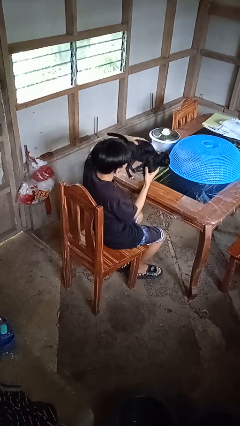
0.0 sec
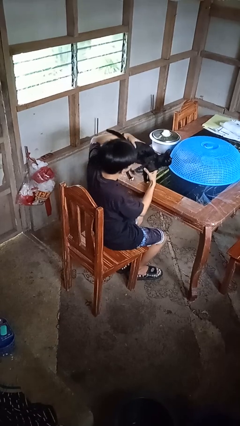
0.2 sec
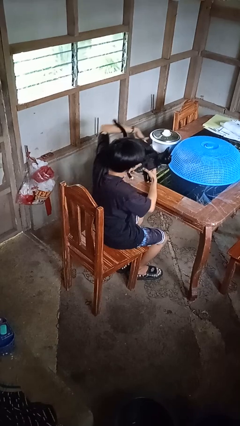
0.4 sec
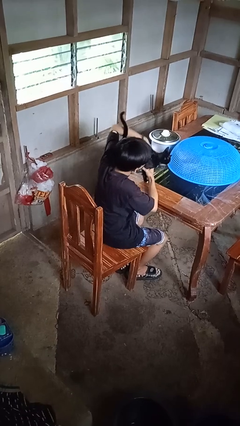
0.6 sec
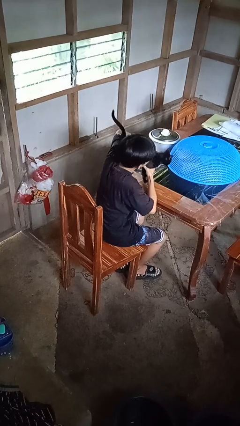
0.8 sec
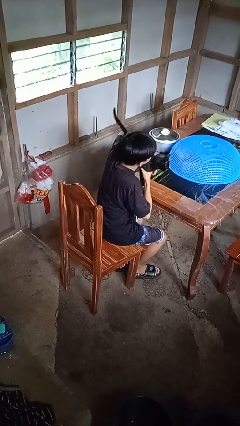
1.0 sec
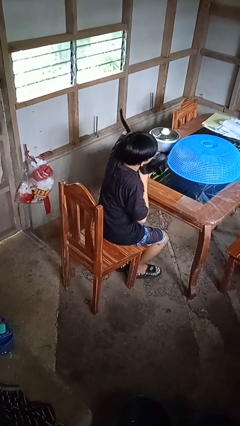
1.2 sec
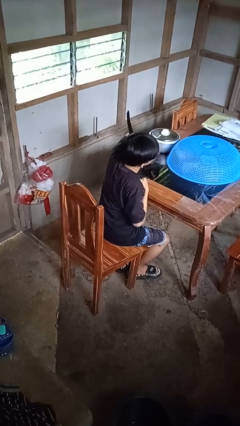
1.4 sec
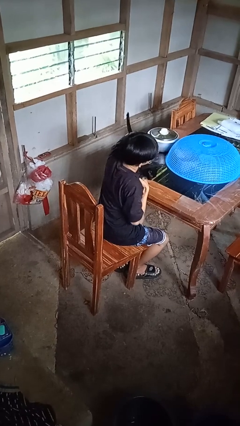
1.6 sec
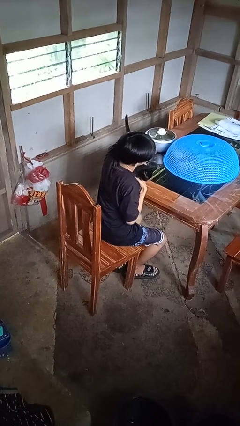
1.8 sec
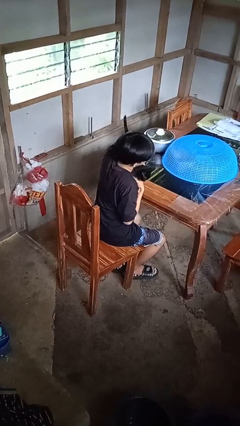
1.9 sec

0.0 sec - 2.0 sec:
person hugs cat

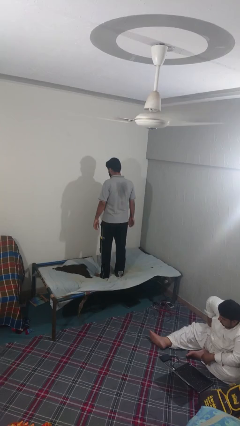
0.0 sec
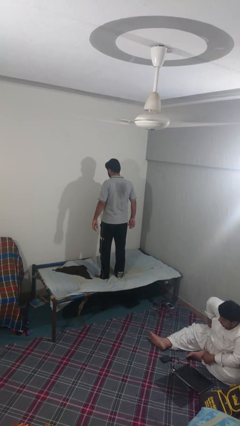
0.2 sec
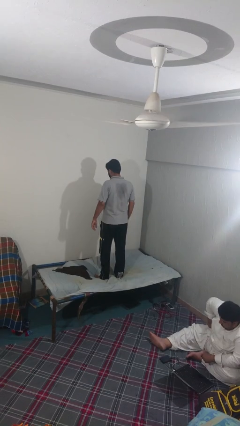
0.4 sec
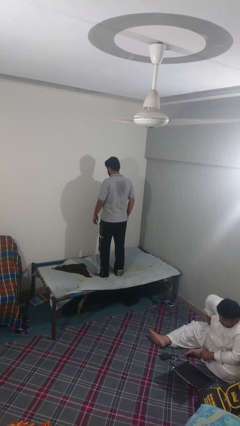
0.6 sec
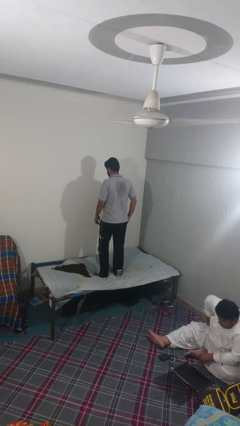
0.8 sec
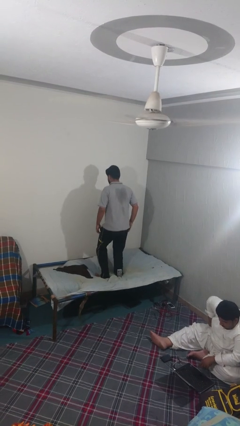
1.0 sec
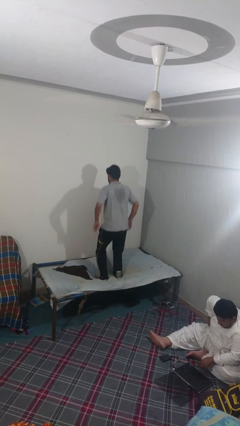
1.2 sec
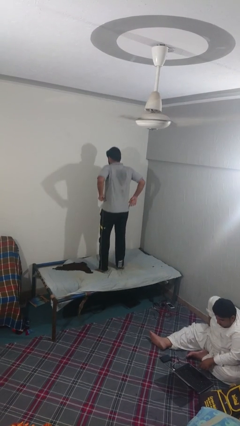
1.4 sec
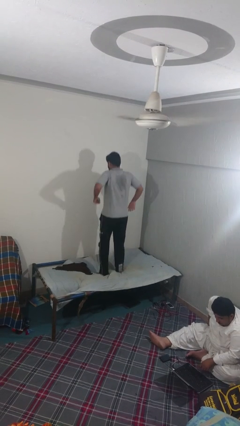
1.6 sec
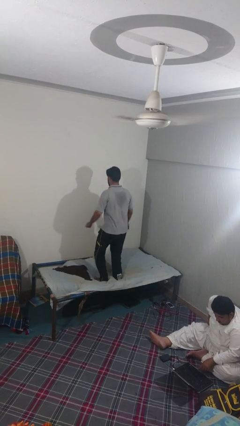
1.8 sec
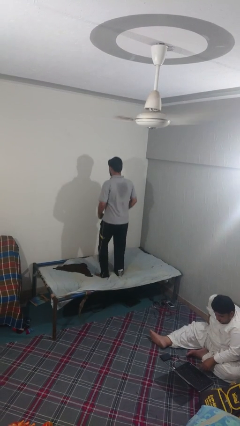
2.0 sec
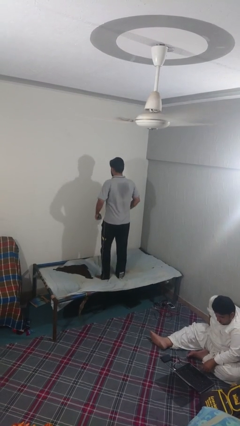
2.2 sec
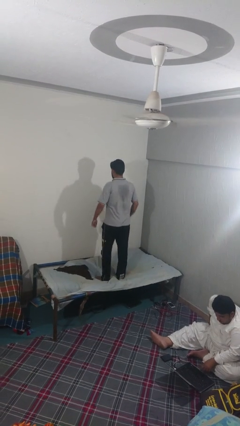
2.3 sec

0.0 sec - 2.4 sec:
person jumps on bed

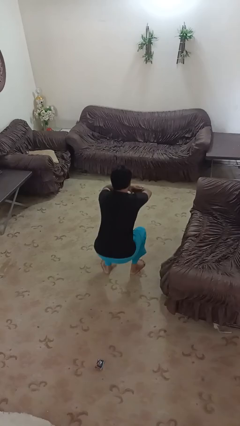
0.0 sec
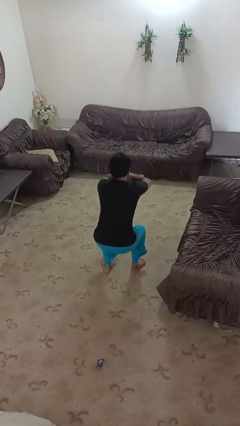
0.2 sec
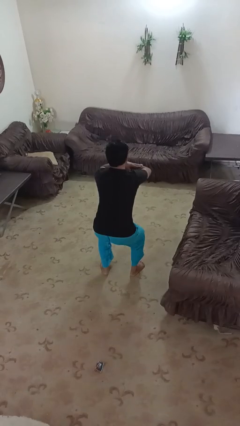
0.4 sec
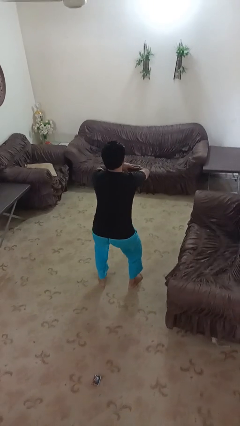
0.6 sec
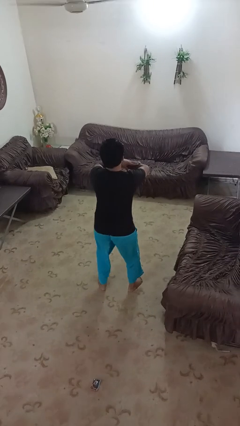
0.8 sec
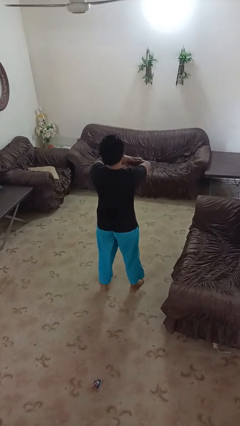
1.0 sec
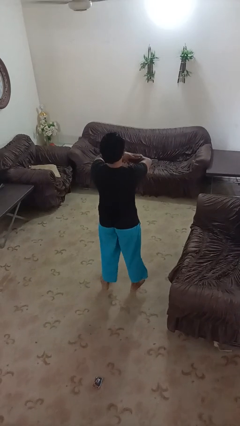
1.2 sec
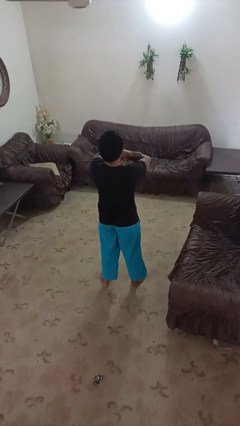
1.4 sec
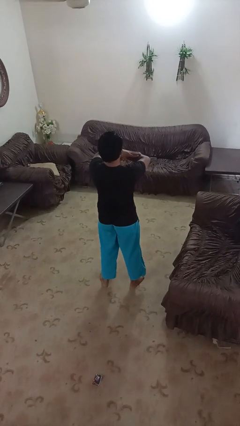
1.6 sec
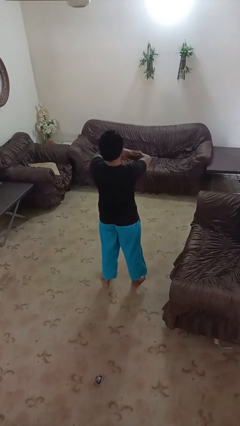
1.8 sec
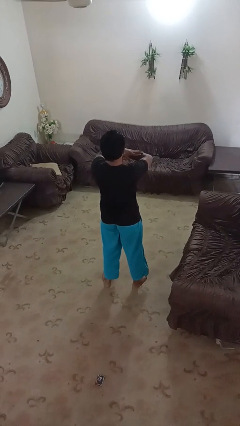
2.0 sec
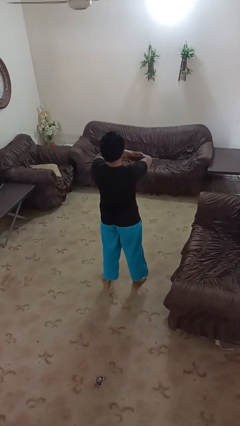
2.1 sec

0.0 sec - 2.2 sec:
person stands up

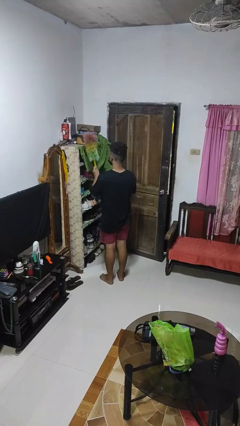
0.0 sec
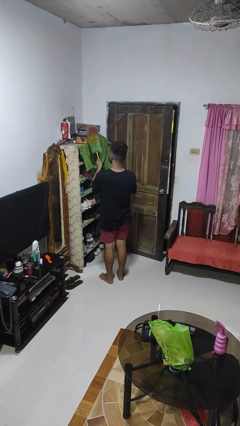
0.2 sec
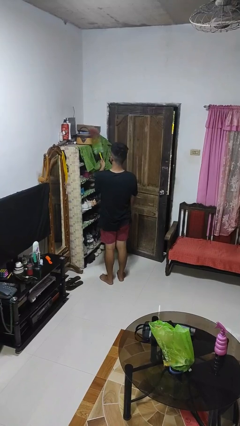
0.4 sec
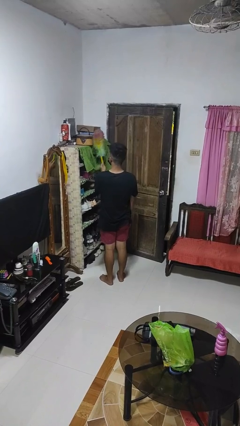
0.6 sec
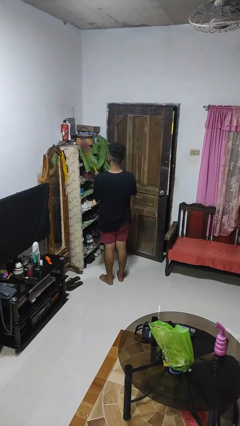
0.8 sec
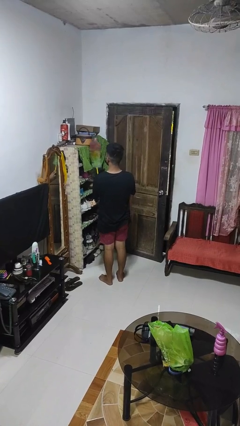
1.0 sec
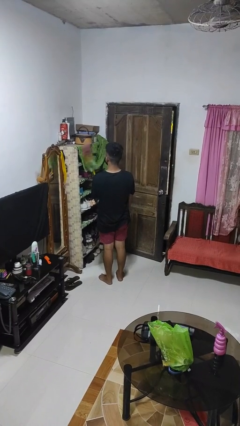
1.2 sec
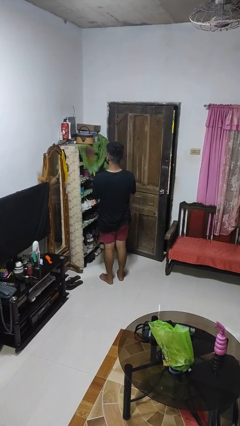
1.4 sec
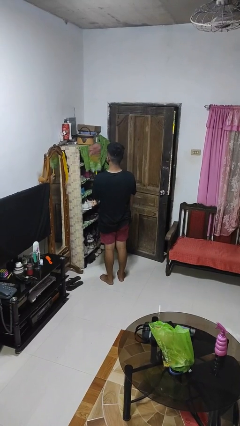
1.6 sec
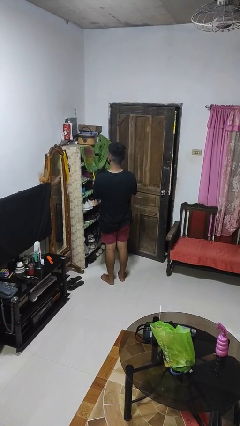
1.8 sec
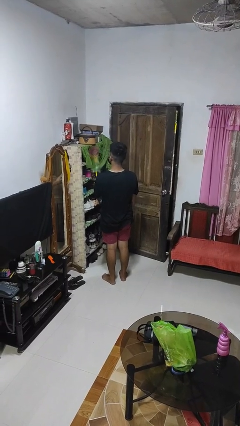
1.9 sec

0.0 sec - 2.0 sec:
person dusts furniture

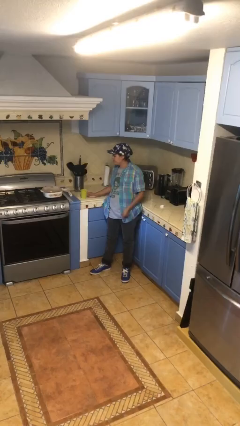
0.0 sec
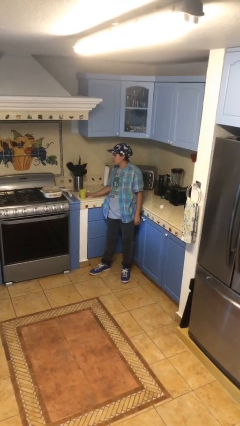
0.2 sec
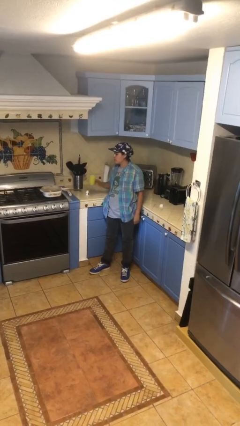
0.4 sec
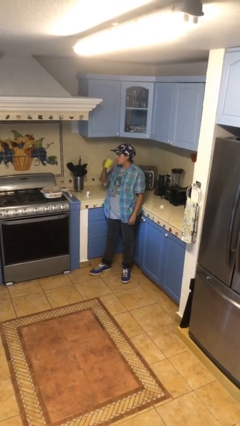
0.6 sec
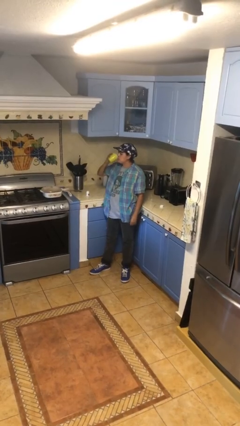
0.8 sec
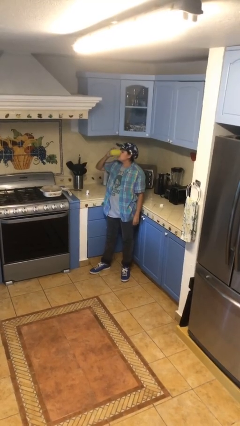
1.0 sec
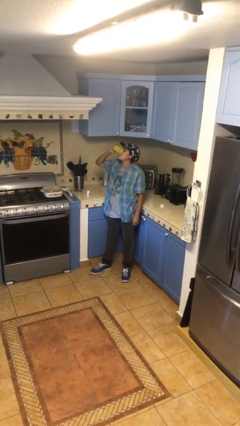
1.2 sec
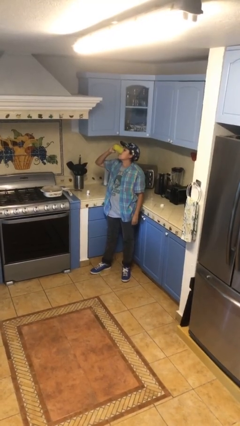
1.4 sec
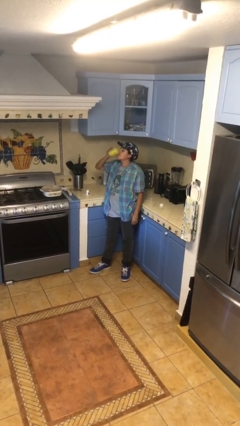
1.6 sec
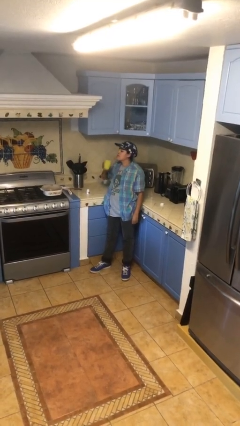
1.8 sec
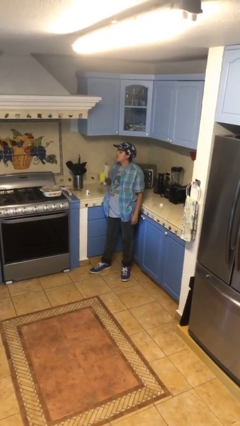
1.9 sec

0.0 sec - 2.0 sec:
person drinks from cup

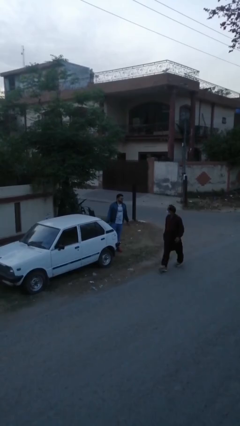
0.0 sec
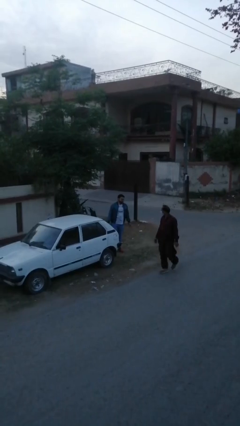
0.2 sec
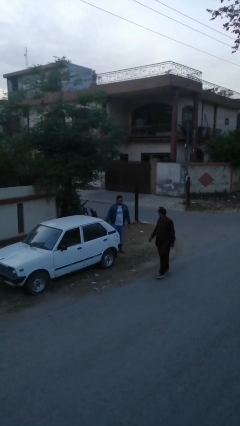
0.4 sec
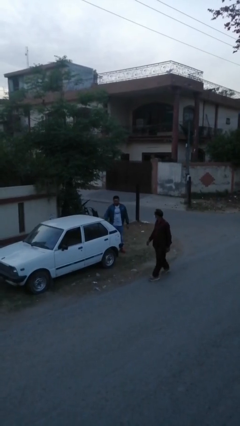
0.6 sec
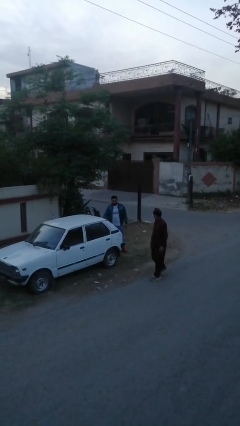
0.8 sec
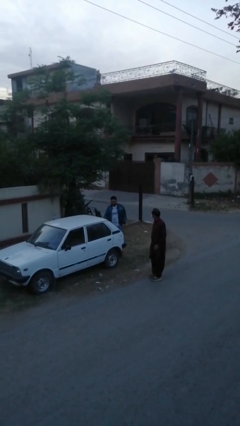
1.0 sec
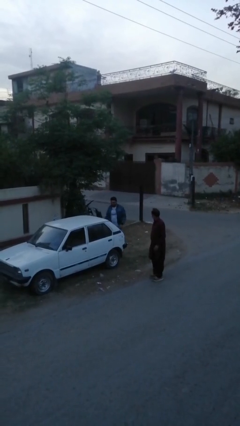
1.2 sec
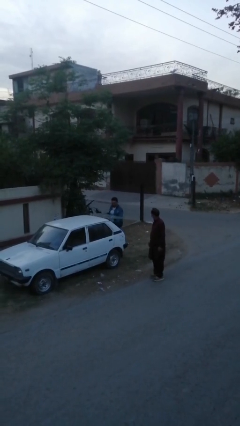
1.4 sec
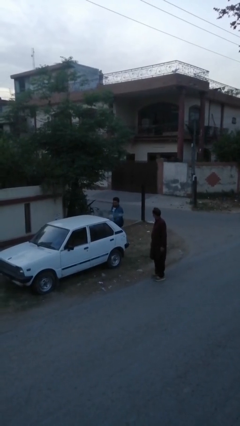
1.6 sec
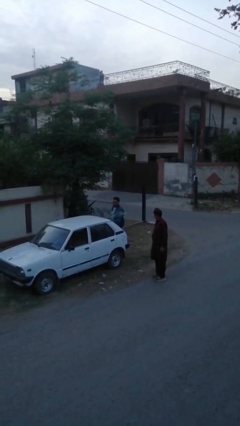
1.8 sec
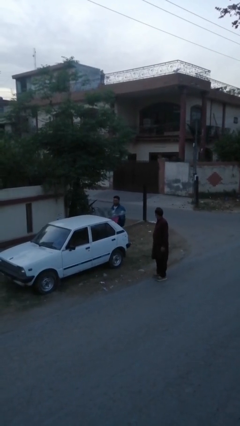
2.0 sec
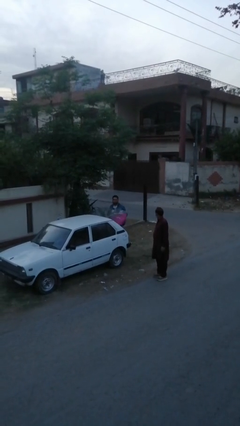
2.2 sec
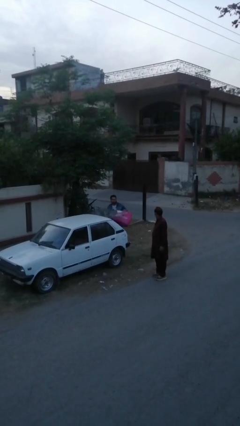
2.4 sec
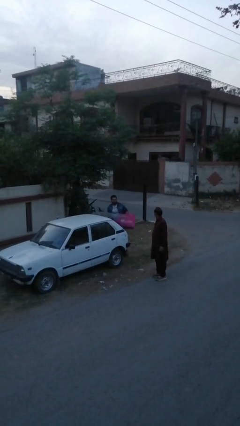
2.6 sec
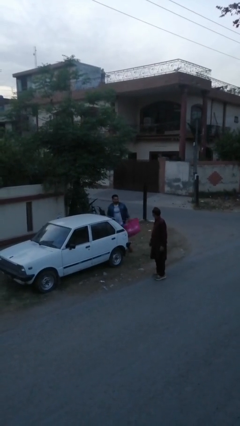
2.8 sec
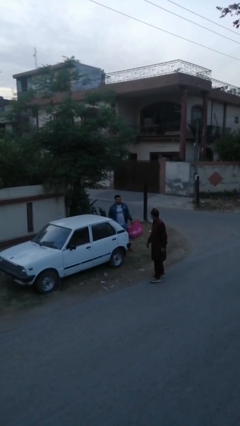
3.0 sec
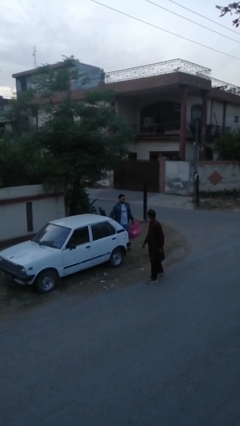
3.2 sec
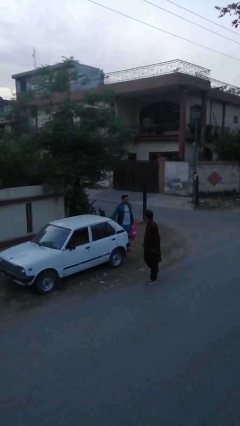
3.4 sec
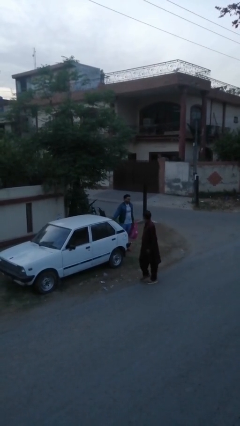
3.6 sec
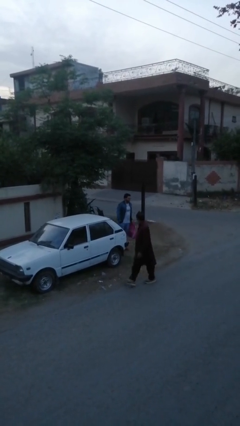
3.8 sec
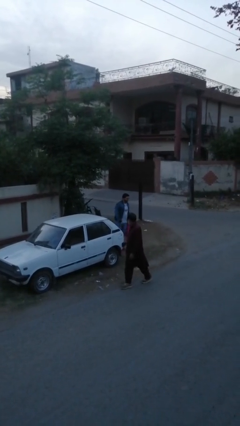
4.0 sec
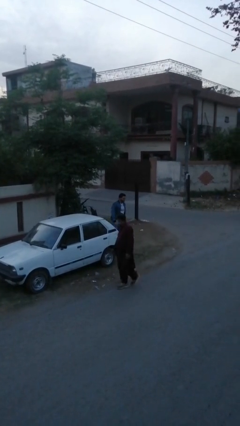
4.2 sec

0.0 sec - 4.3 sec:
person unloads car

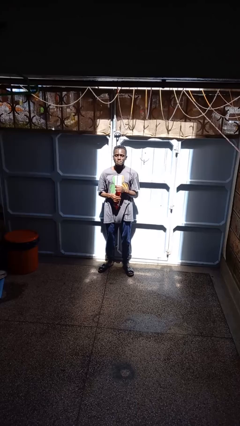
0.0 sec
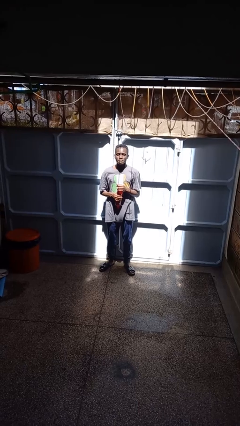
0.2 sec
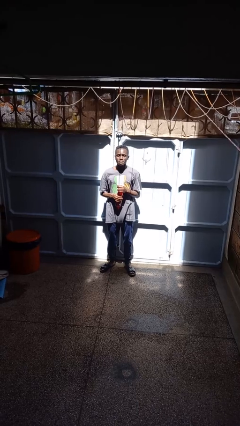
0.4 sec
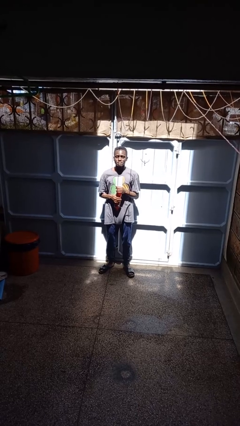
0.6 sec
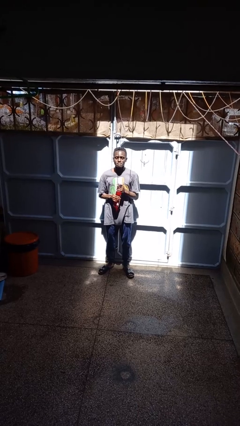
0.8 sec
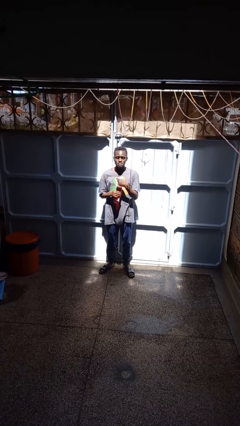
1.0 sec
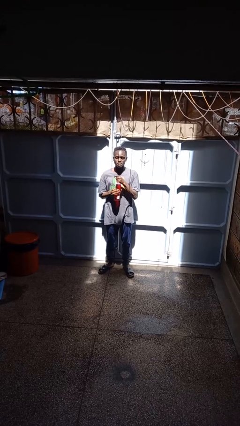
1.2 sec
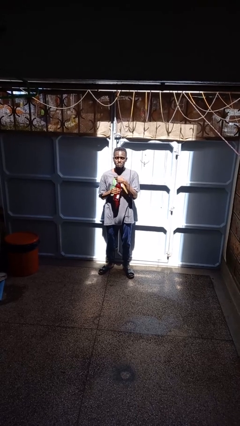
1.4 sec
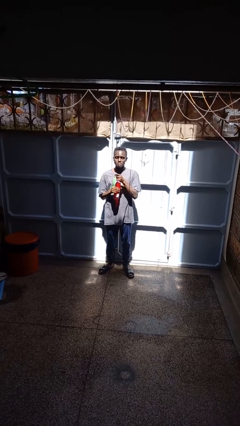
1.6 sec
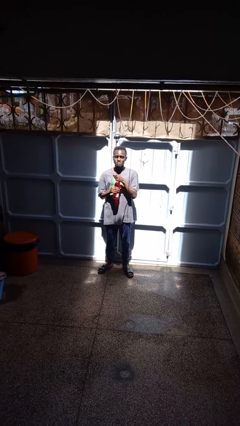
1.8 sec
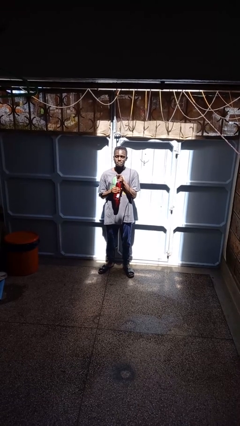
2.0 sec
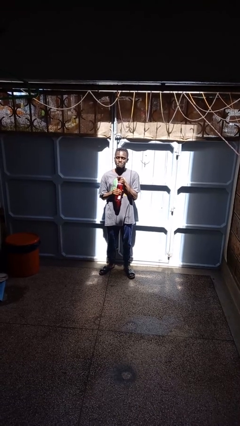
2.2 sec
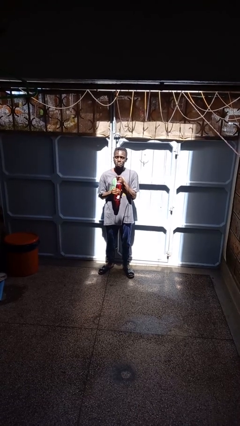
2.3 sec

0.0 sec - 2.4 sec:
person opens beverage can
